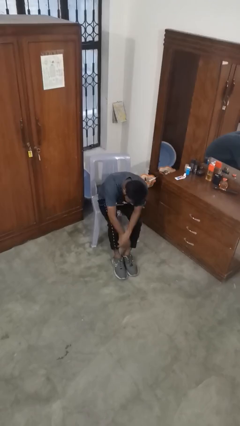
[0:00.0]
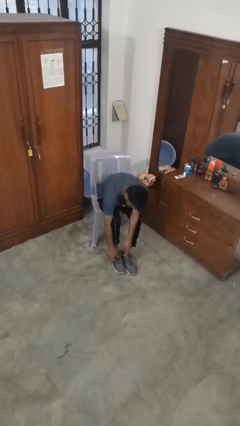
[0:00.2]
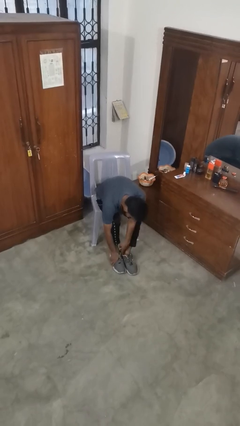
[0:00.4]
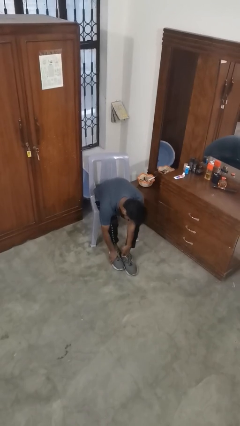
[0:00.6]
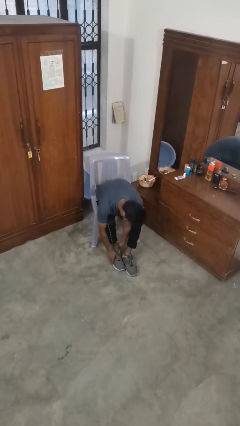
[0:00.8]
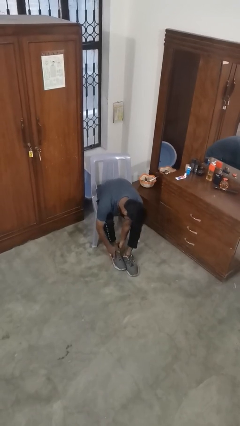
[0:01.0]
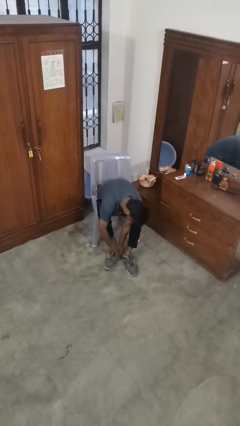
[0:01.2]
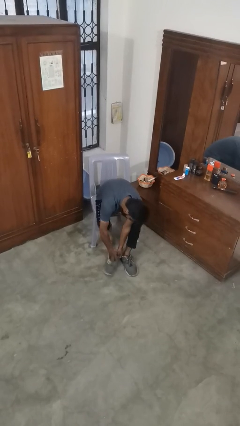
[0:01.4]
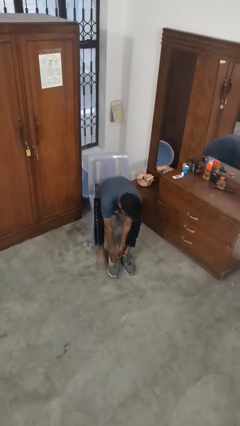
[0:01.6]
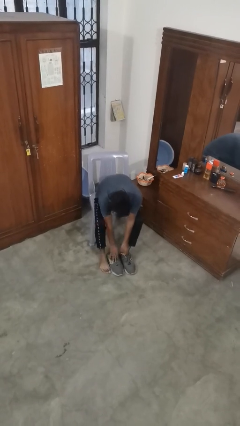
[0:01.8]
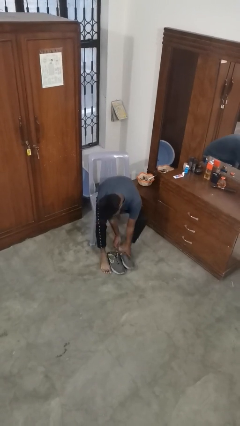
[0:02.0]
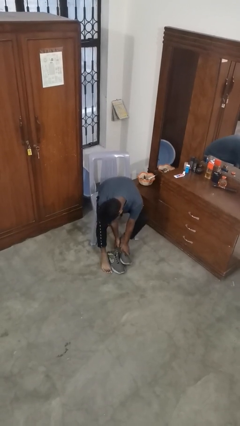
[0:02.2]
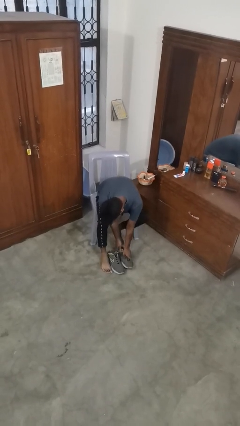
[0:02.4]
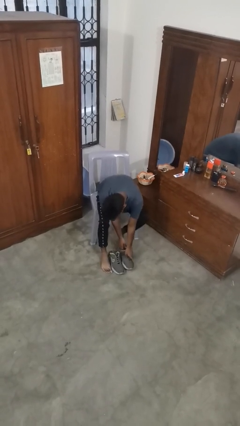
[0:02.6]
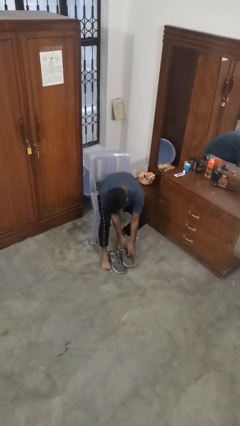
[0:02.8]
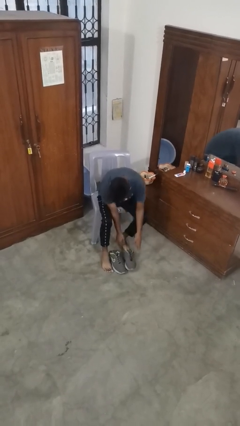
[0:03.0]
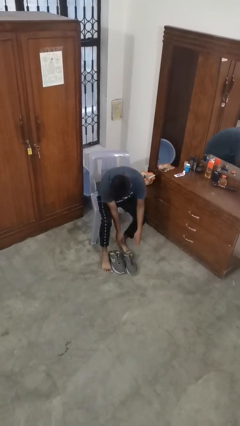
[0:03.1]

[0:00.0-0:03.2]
person takes off shoes

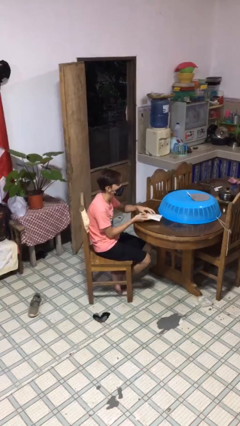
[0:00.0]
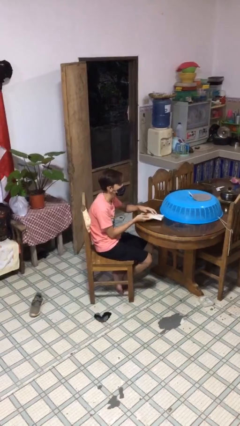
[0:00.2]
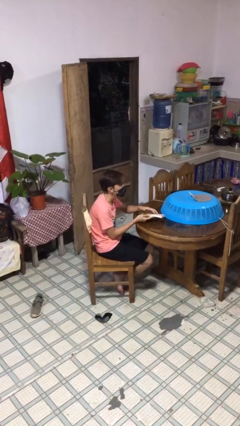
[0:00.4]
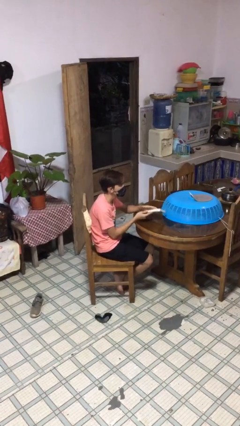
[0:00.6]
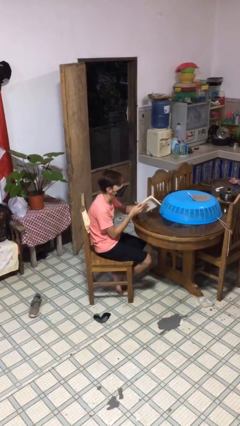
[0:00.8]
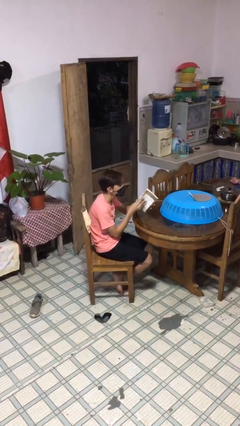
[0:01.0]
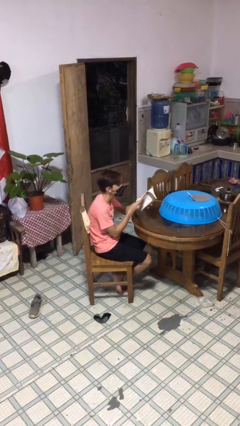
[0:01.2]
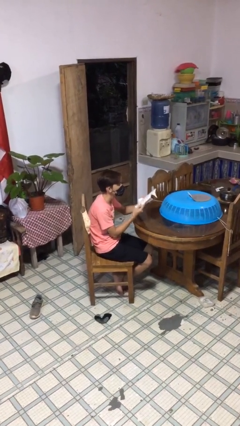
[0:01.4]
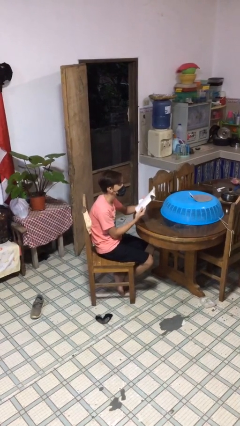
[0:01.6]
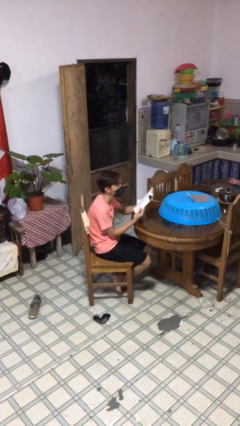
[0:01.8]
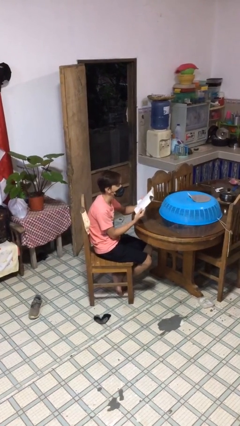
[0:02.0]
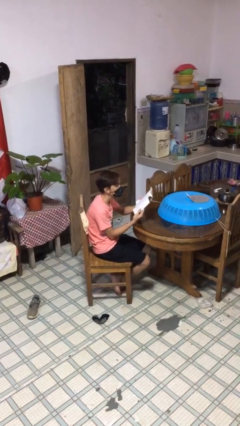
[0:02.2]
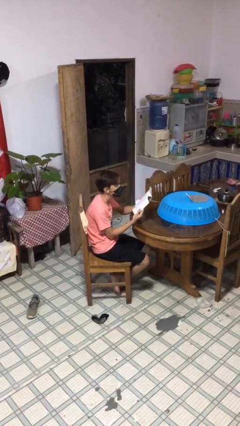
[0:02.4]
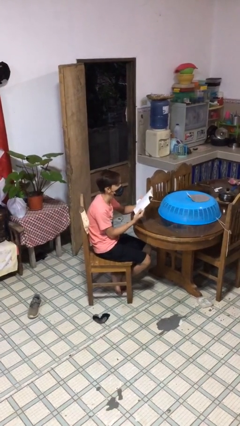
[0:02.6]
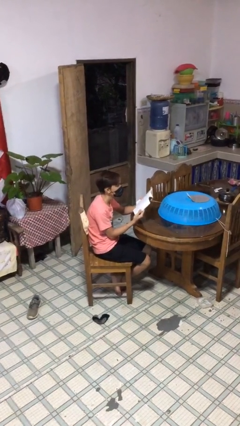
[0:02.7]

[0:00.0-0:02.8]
person reads document

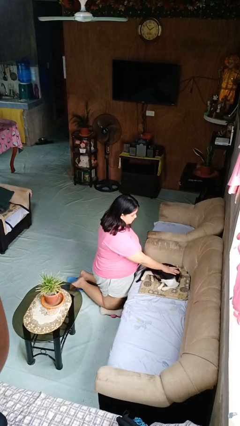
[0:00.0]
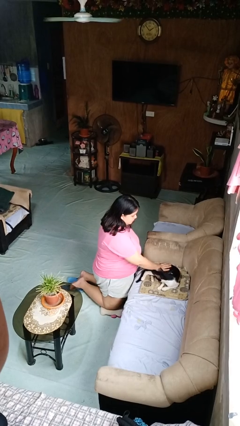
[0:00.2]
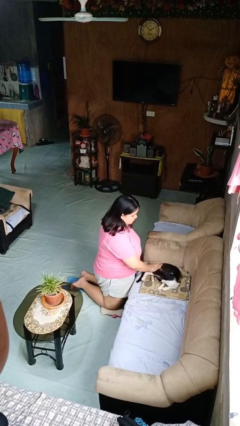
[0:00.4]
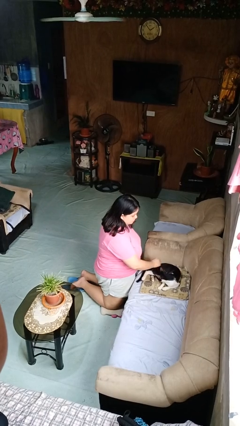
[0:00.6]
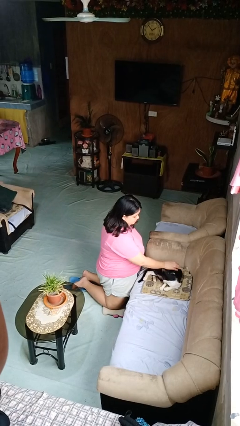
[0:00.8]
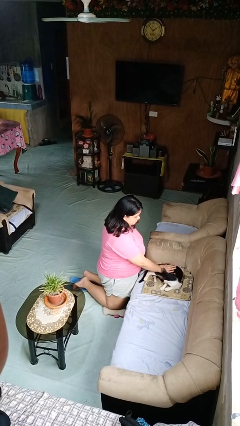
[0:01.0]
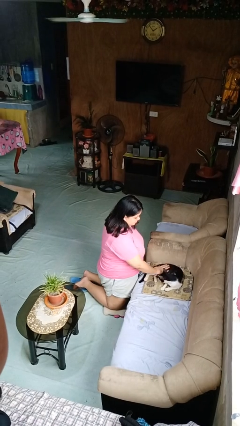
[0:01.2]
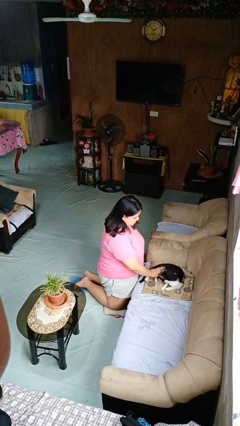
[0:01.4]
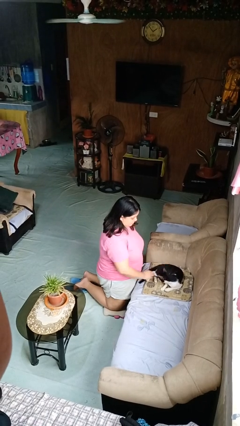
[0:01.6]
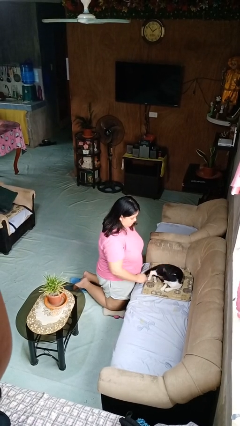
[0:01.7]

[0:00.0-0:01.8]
person pets cat

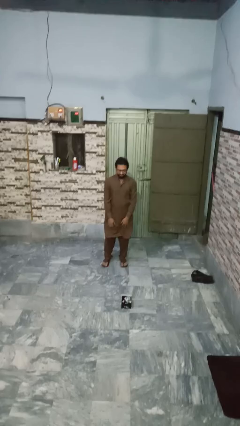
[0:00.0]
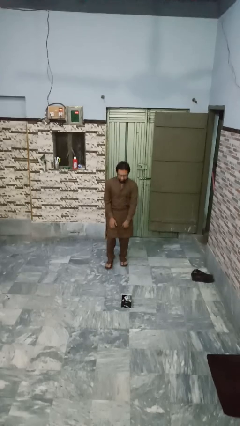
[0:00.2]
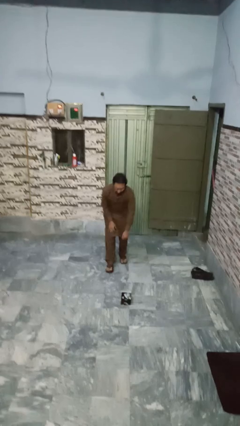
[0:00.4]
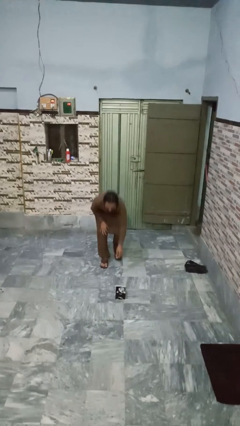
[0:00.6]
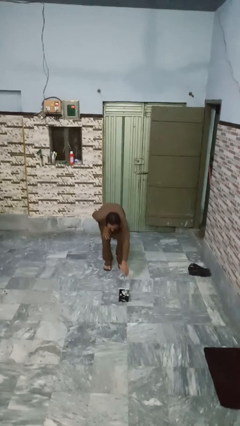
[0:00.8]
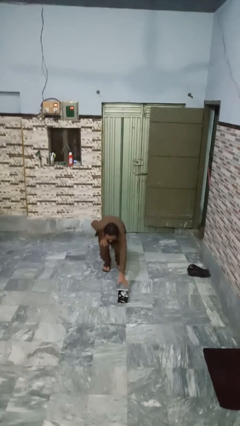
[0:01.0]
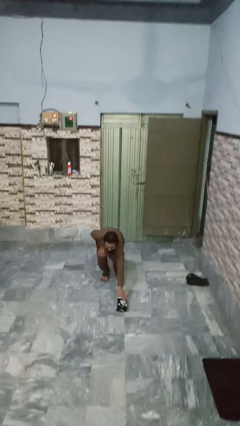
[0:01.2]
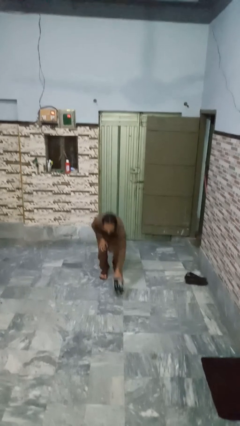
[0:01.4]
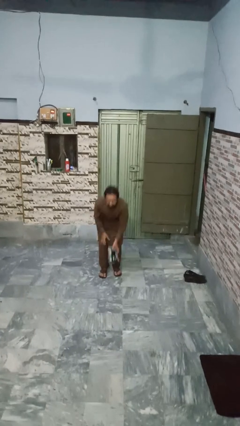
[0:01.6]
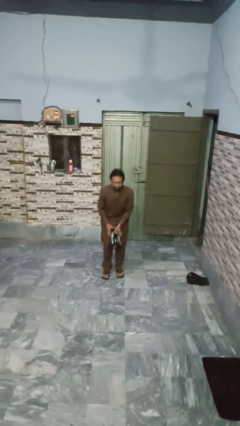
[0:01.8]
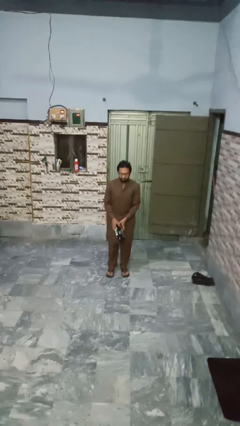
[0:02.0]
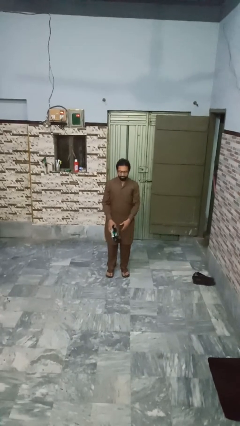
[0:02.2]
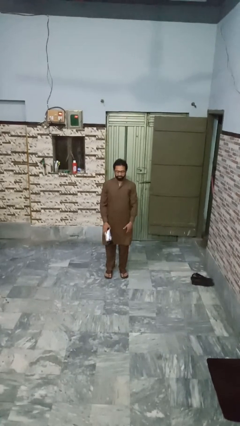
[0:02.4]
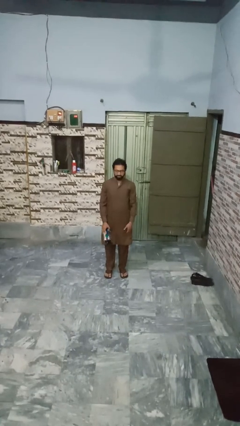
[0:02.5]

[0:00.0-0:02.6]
person picks up object from floor

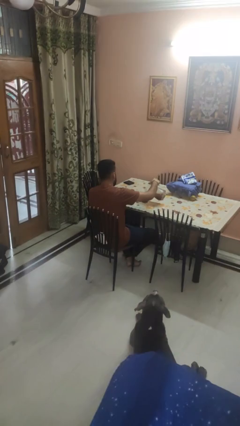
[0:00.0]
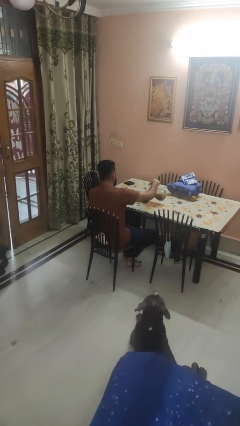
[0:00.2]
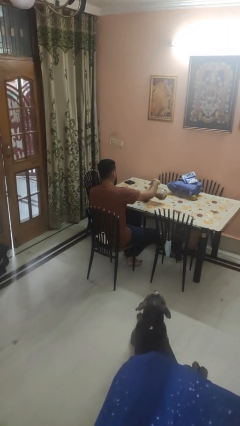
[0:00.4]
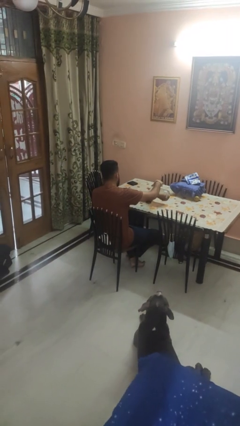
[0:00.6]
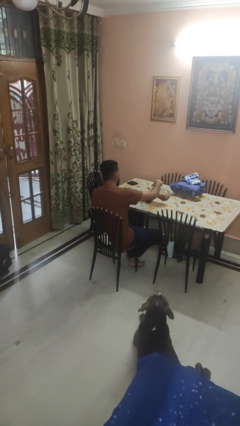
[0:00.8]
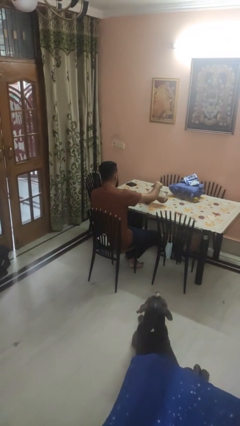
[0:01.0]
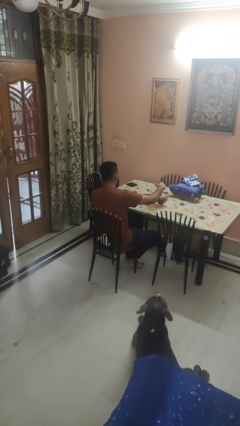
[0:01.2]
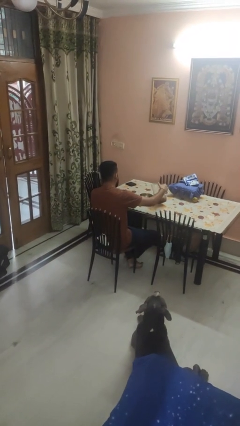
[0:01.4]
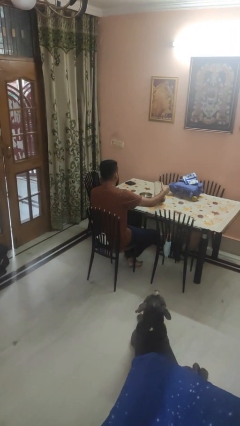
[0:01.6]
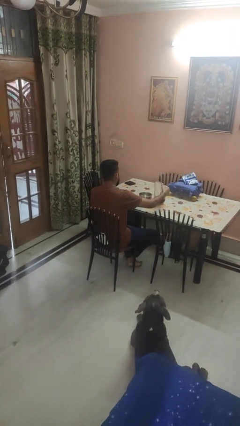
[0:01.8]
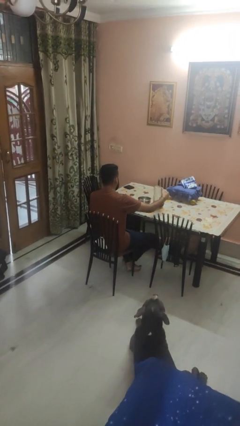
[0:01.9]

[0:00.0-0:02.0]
person pours into bowl

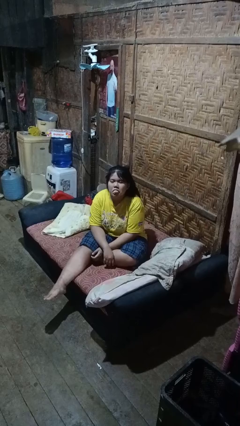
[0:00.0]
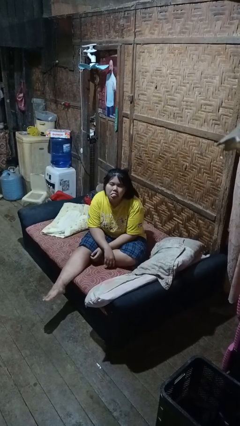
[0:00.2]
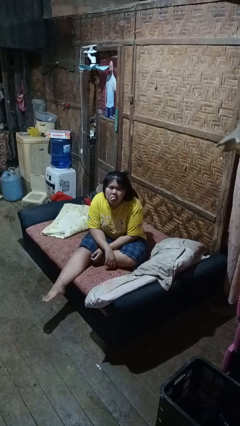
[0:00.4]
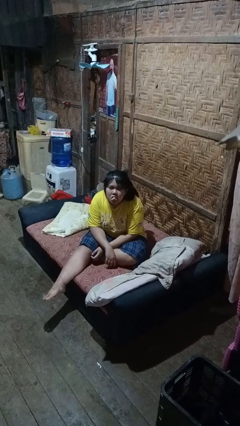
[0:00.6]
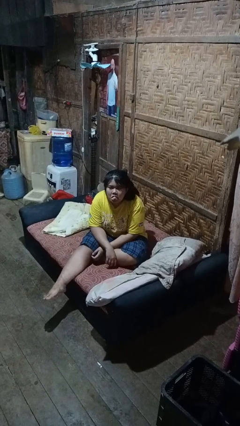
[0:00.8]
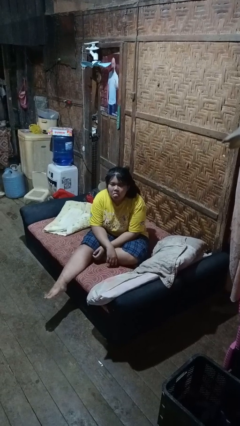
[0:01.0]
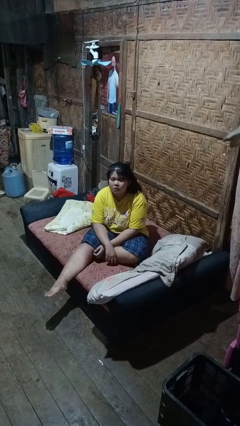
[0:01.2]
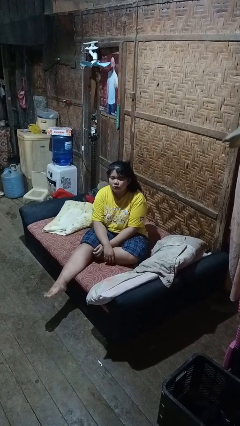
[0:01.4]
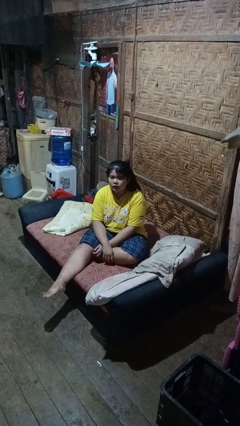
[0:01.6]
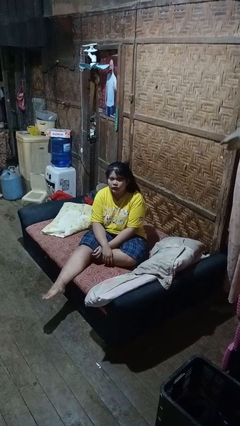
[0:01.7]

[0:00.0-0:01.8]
person sticks out tongue

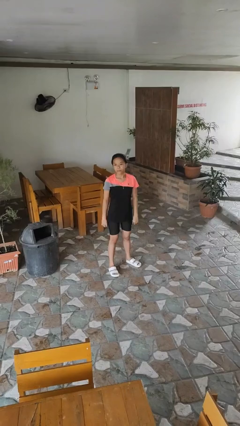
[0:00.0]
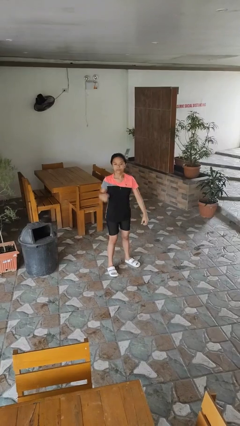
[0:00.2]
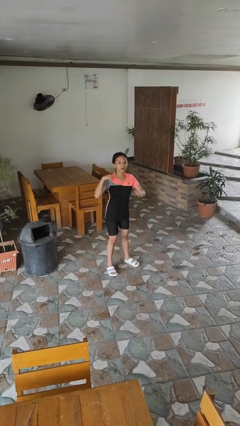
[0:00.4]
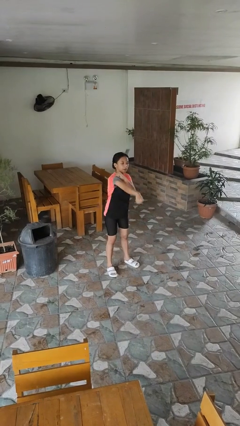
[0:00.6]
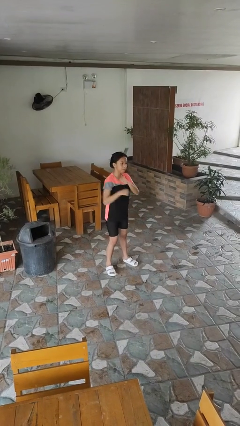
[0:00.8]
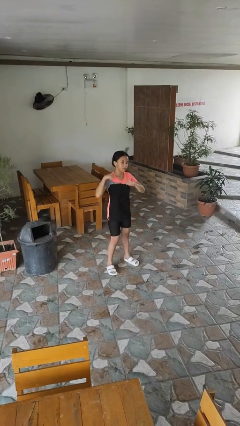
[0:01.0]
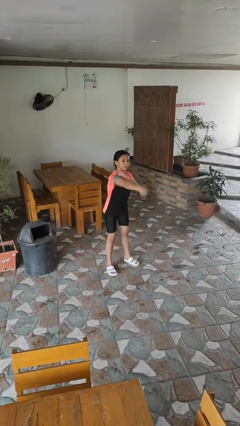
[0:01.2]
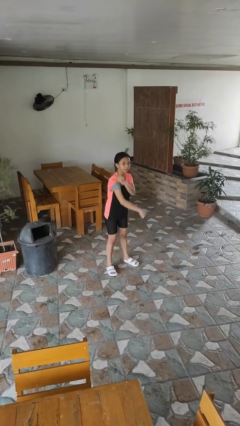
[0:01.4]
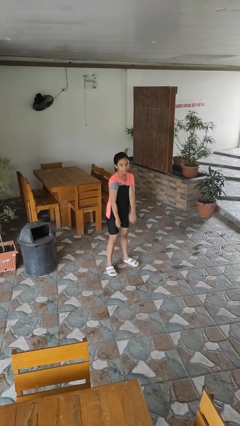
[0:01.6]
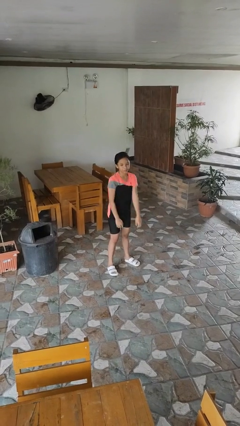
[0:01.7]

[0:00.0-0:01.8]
person punches

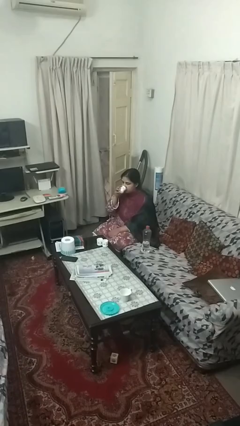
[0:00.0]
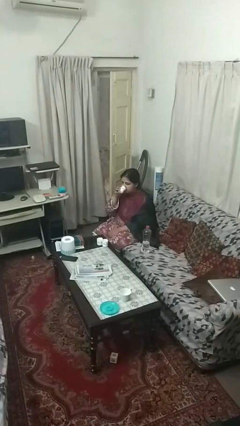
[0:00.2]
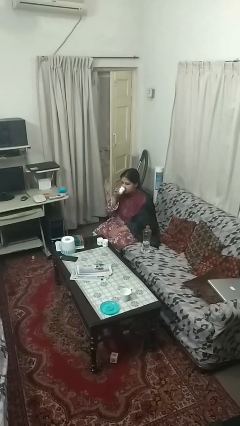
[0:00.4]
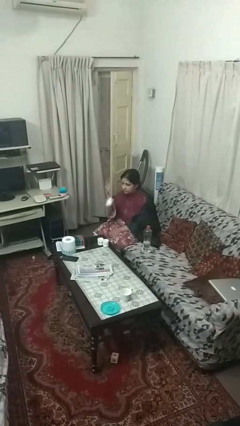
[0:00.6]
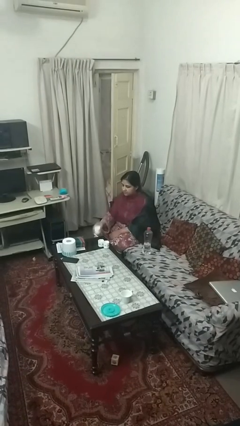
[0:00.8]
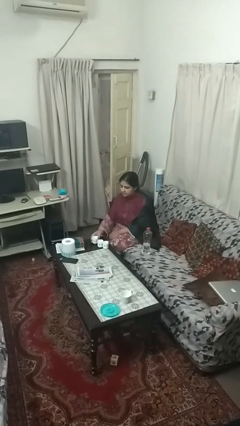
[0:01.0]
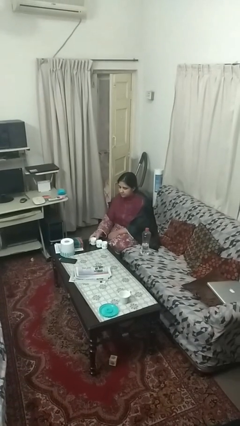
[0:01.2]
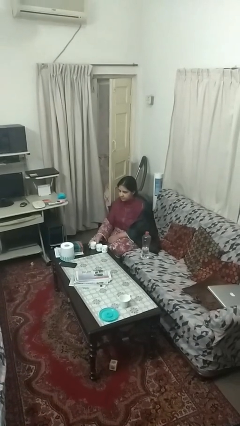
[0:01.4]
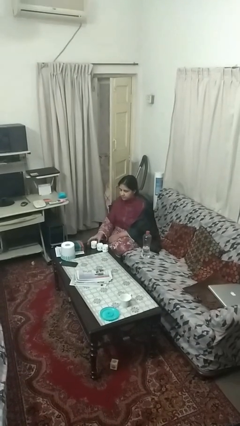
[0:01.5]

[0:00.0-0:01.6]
person puts down object on table
